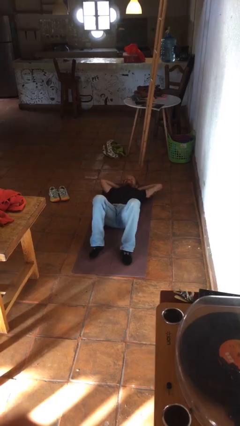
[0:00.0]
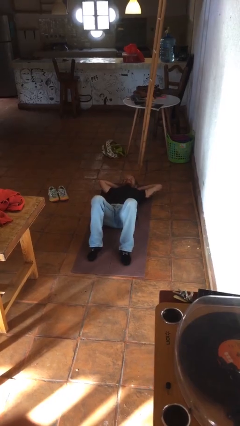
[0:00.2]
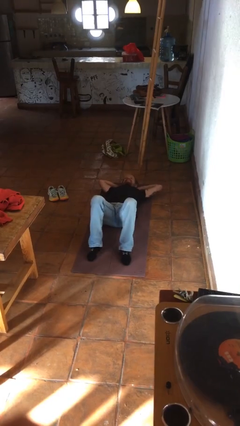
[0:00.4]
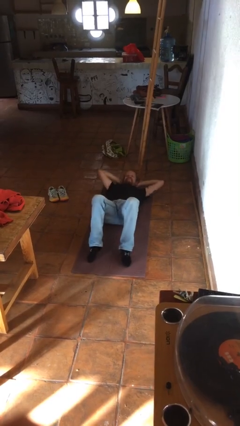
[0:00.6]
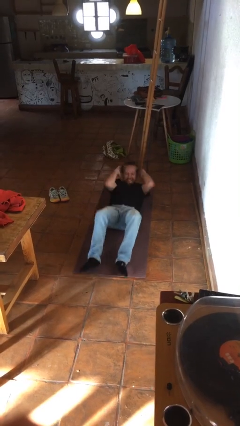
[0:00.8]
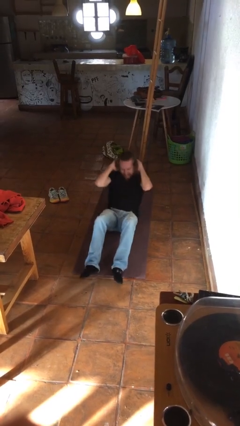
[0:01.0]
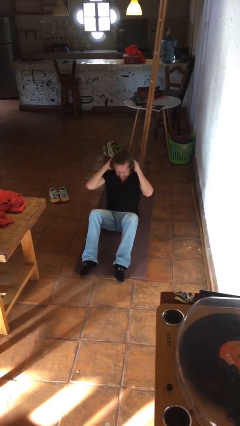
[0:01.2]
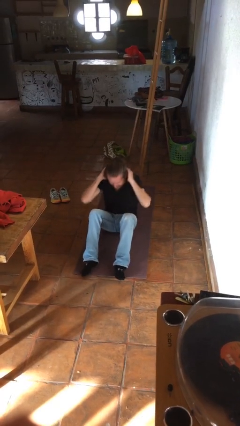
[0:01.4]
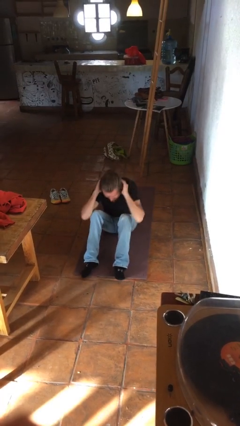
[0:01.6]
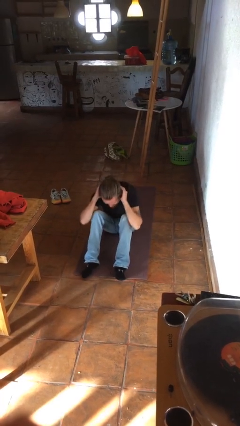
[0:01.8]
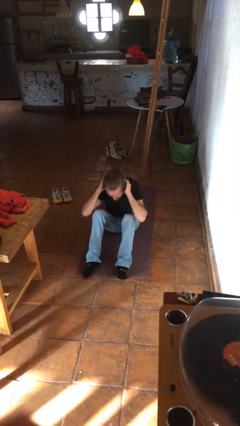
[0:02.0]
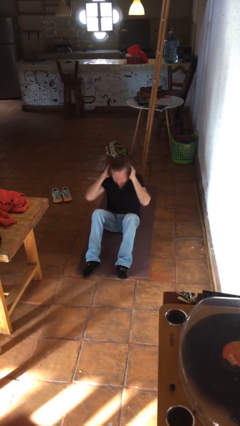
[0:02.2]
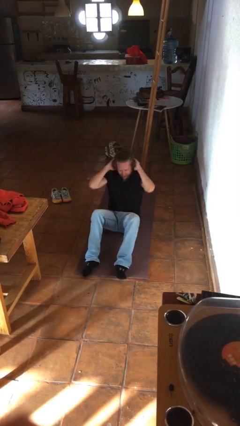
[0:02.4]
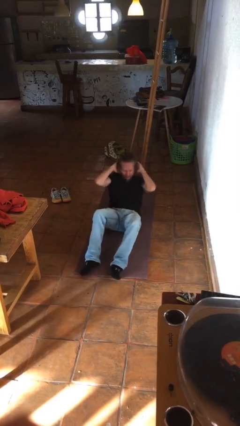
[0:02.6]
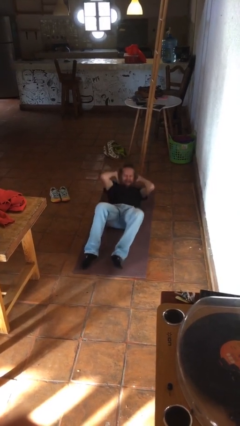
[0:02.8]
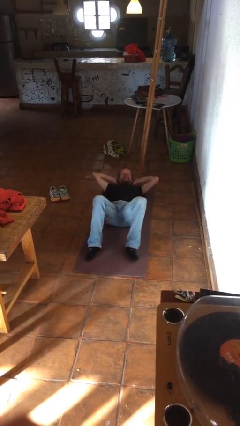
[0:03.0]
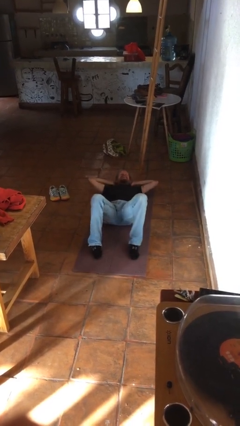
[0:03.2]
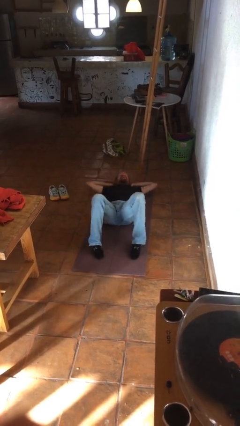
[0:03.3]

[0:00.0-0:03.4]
person exercises with situp

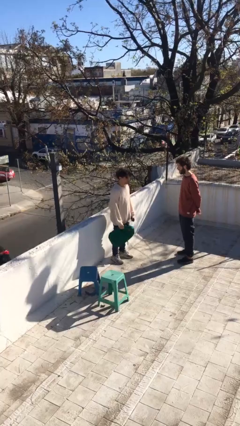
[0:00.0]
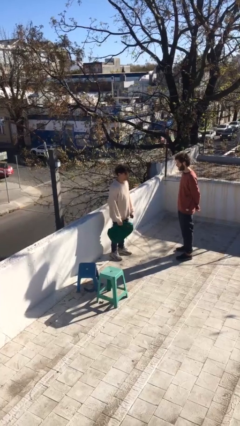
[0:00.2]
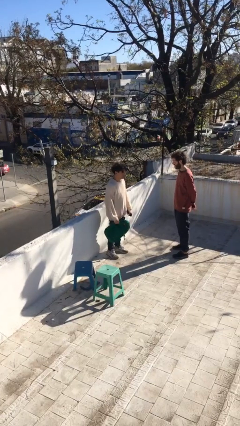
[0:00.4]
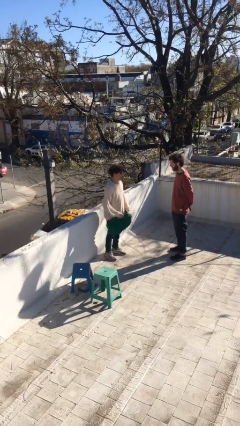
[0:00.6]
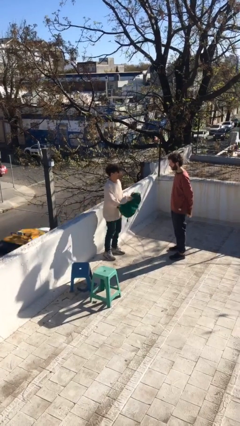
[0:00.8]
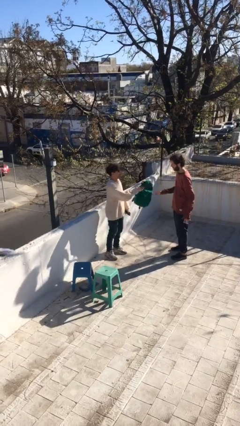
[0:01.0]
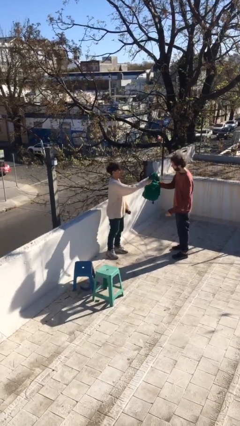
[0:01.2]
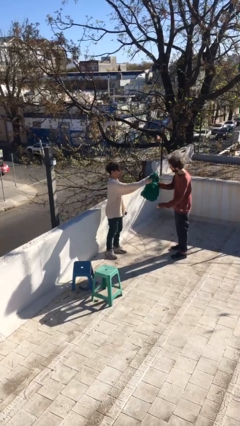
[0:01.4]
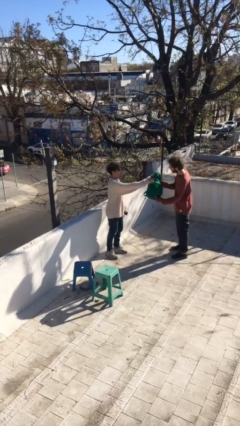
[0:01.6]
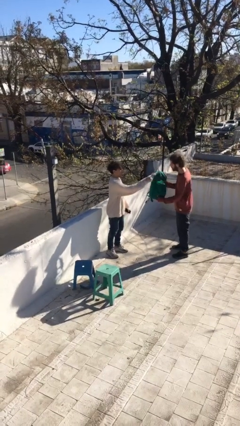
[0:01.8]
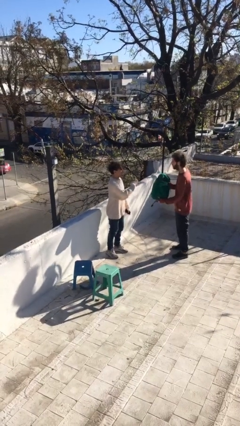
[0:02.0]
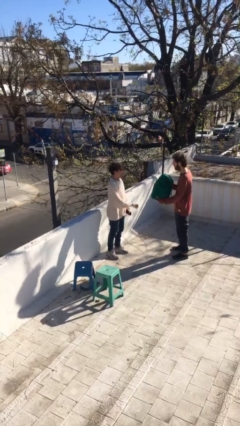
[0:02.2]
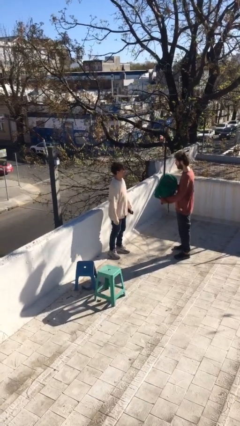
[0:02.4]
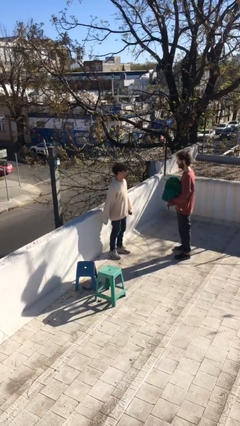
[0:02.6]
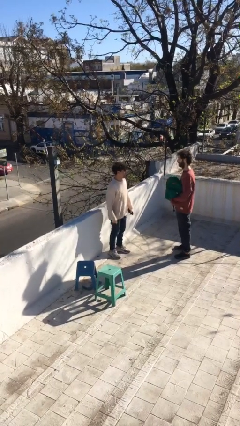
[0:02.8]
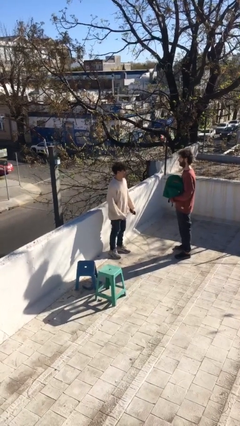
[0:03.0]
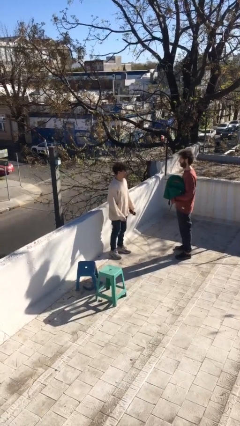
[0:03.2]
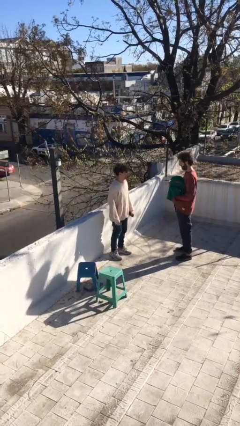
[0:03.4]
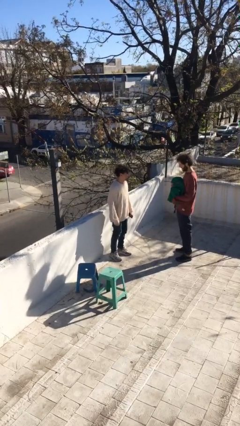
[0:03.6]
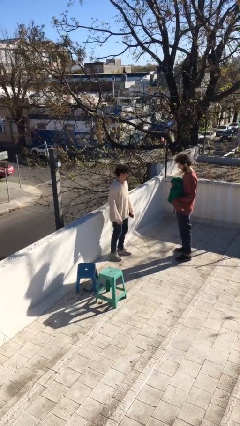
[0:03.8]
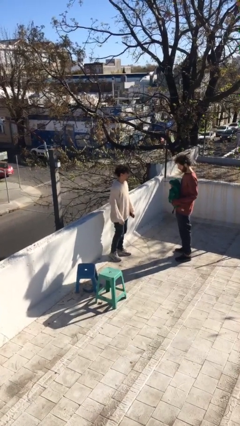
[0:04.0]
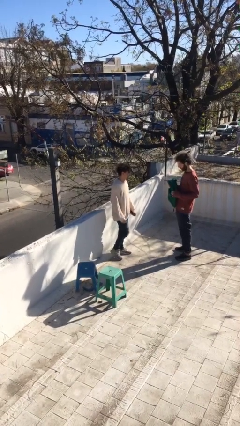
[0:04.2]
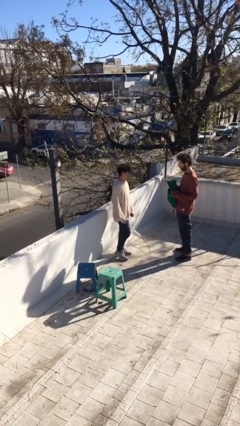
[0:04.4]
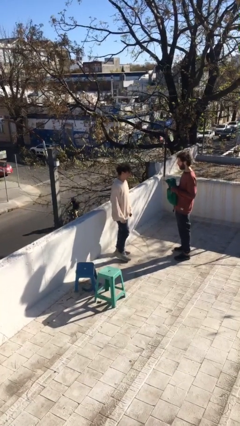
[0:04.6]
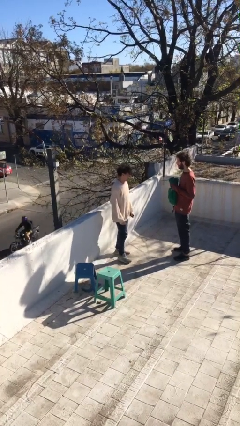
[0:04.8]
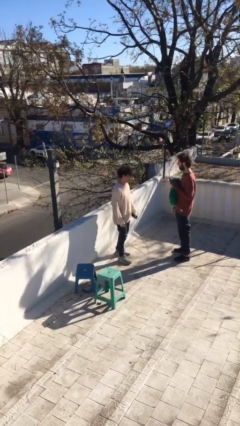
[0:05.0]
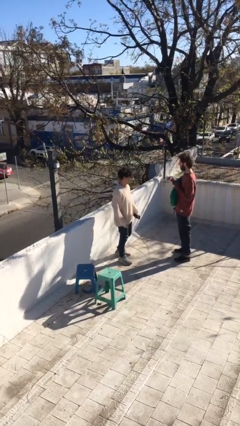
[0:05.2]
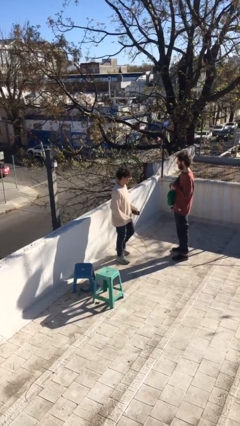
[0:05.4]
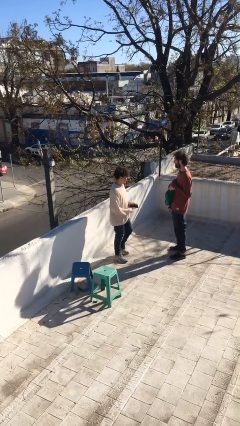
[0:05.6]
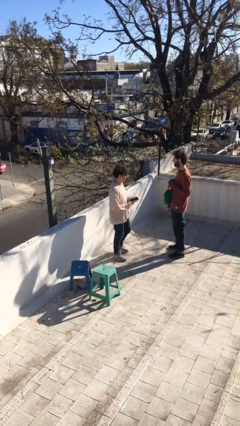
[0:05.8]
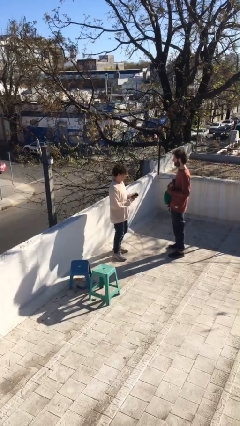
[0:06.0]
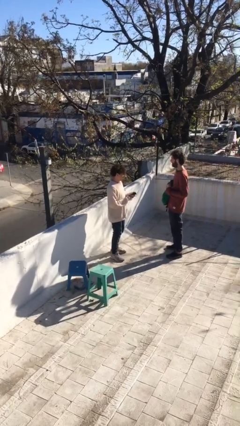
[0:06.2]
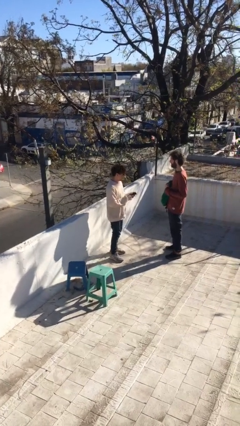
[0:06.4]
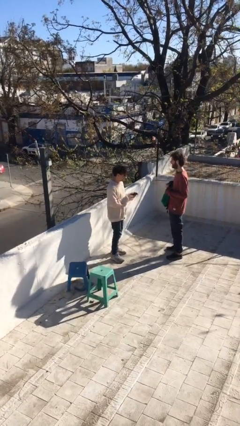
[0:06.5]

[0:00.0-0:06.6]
person transfers object to person

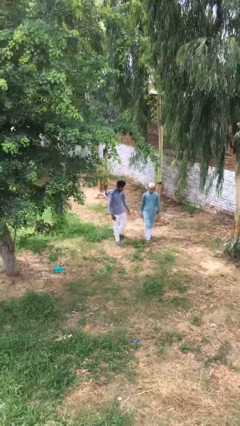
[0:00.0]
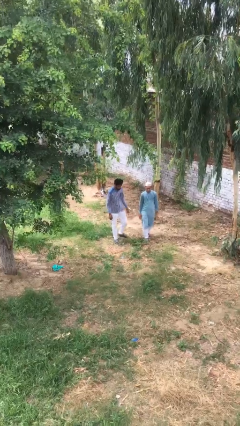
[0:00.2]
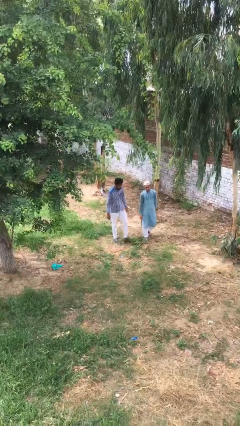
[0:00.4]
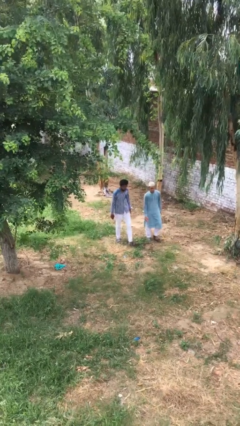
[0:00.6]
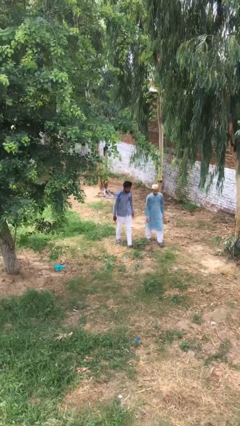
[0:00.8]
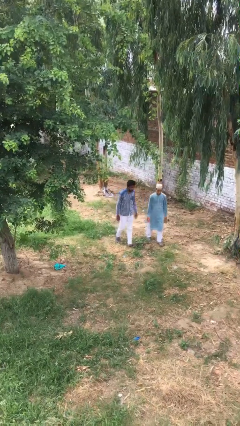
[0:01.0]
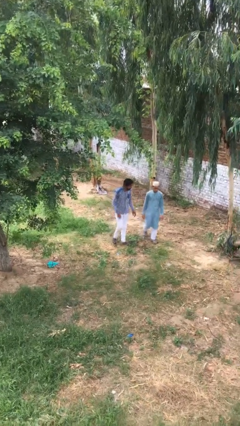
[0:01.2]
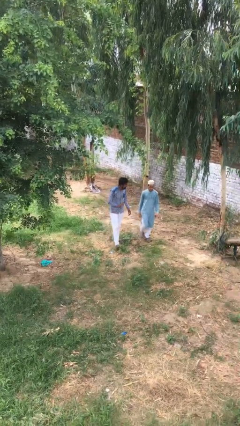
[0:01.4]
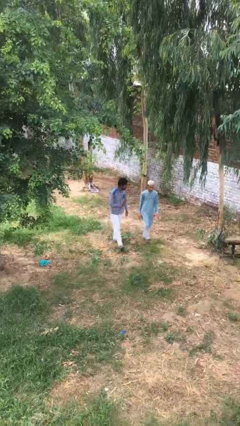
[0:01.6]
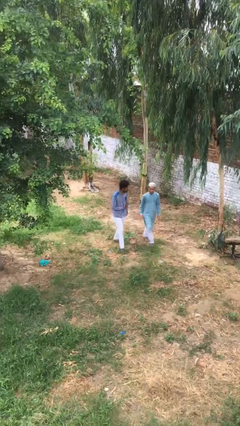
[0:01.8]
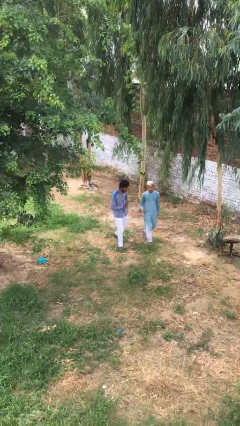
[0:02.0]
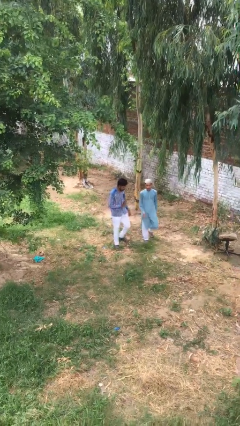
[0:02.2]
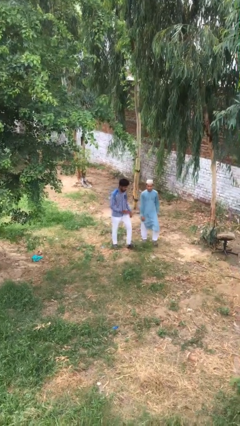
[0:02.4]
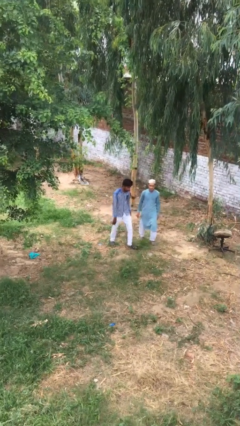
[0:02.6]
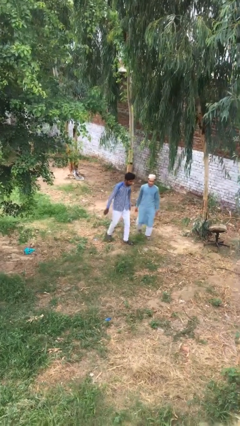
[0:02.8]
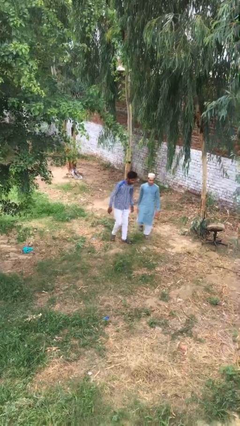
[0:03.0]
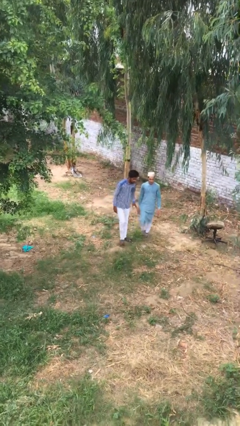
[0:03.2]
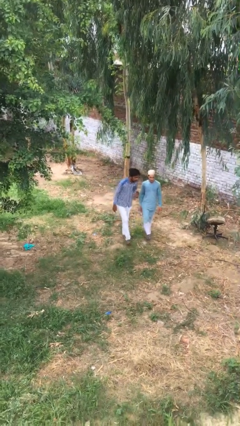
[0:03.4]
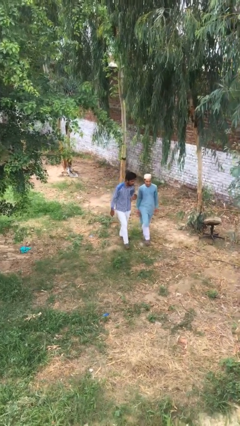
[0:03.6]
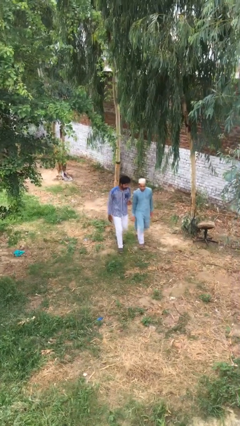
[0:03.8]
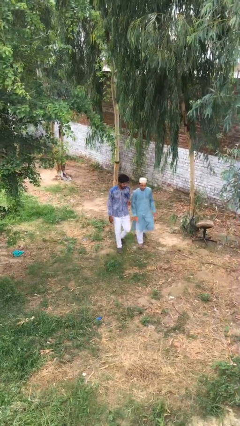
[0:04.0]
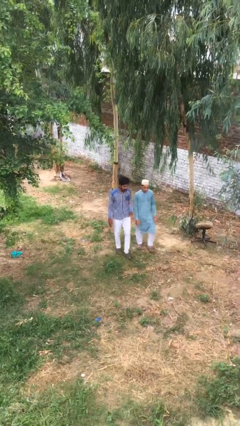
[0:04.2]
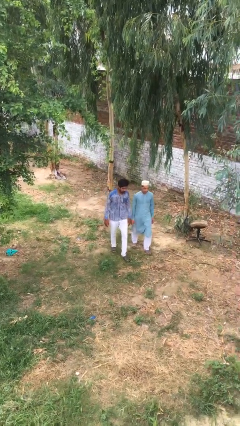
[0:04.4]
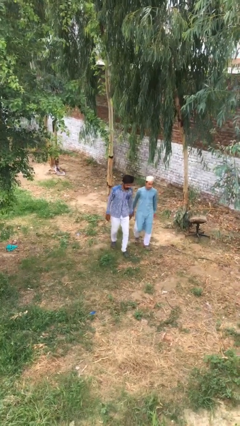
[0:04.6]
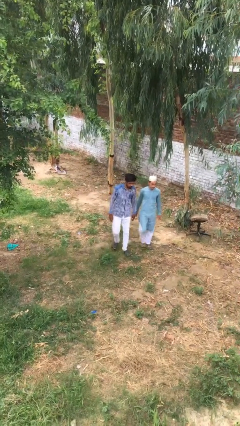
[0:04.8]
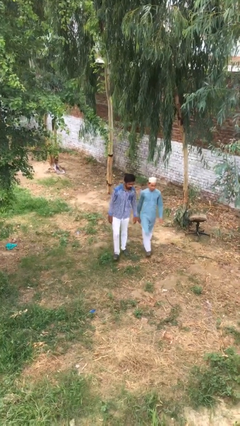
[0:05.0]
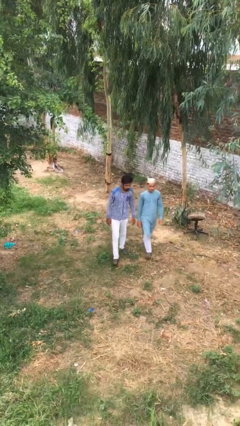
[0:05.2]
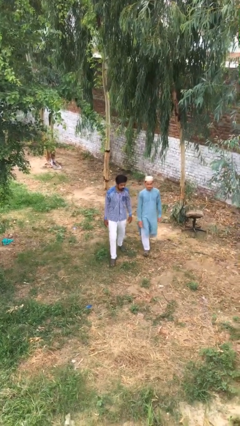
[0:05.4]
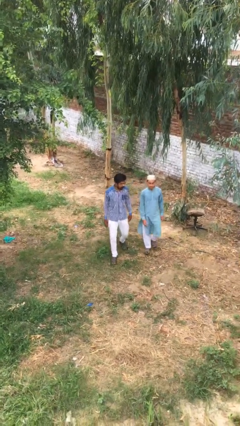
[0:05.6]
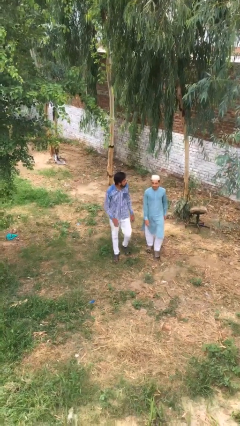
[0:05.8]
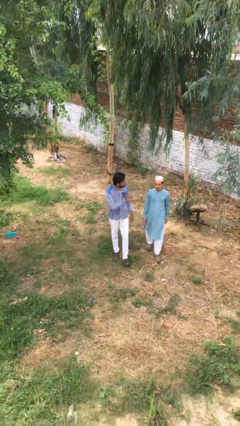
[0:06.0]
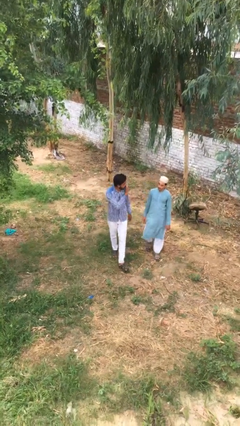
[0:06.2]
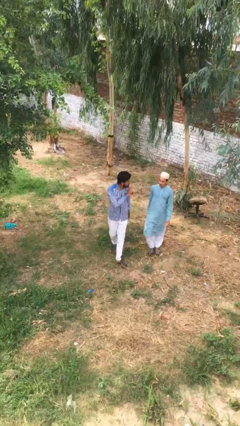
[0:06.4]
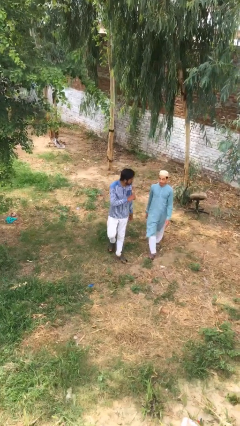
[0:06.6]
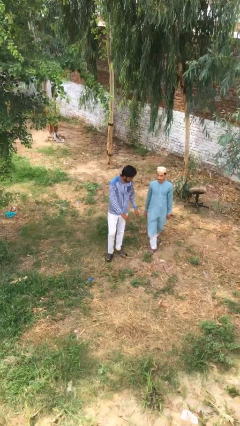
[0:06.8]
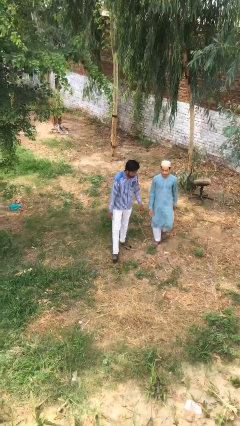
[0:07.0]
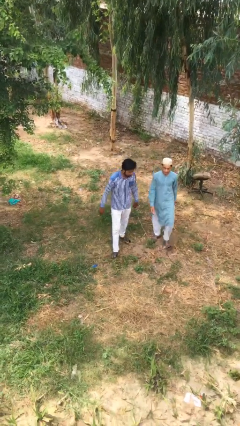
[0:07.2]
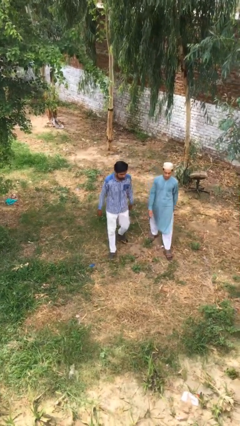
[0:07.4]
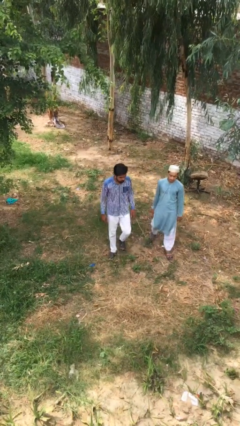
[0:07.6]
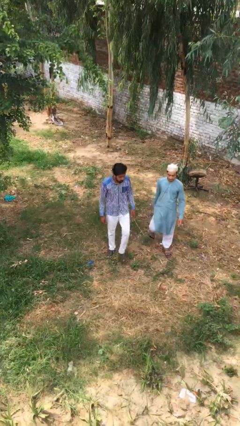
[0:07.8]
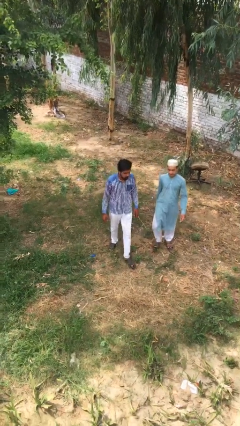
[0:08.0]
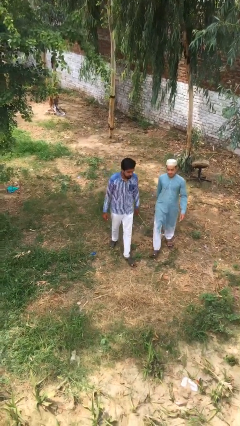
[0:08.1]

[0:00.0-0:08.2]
person talks to person
